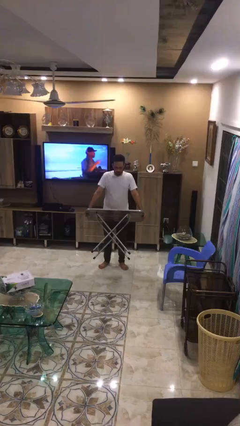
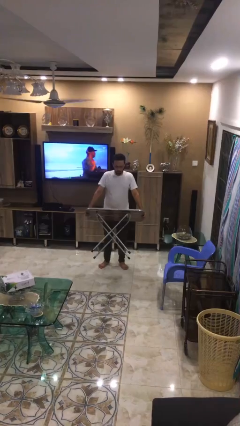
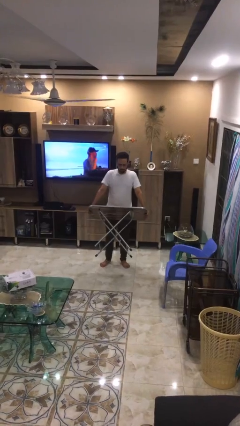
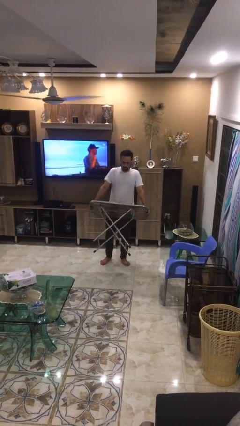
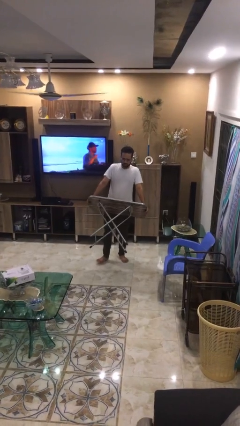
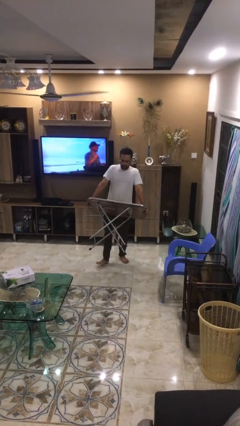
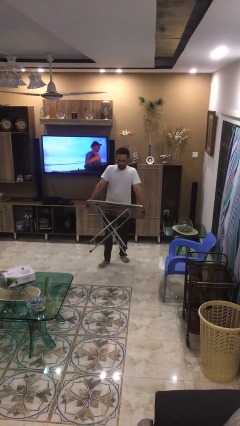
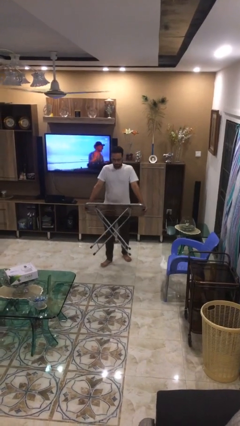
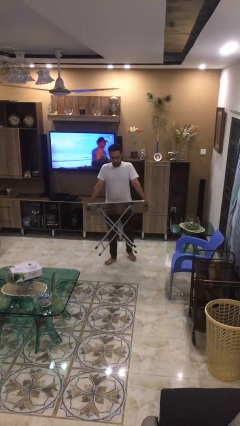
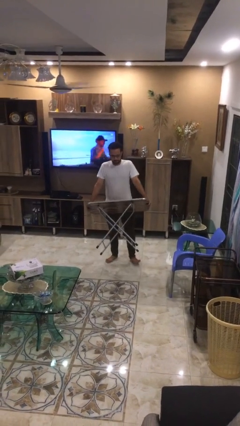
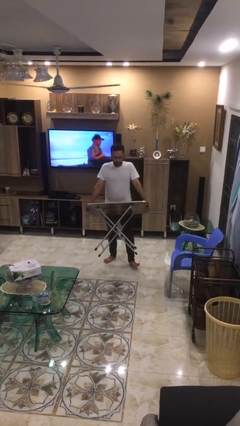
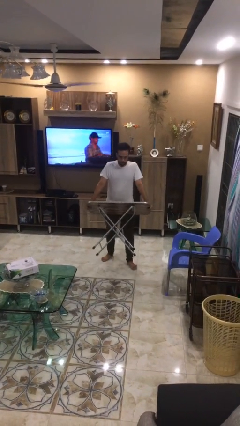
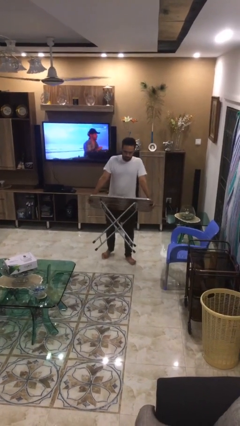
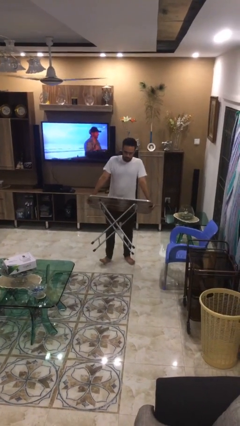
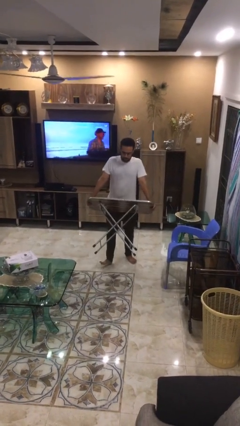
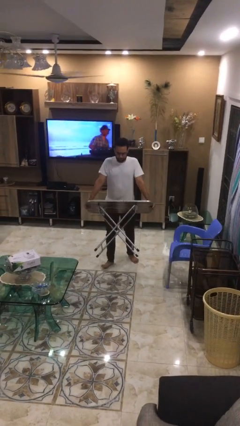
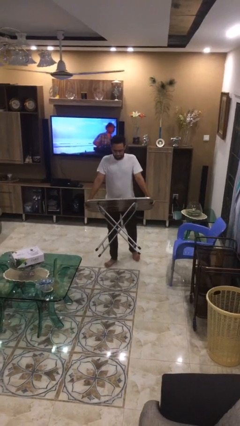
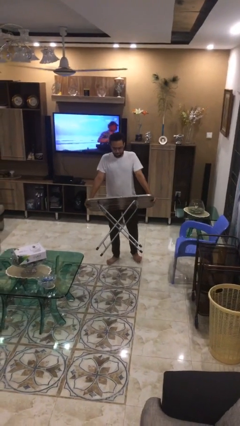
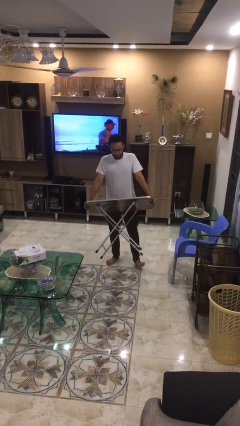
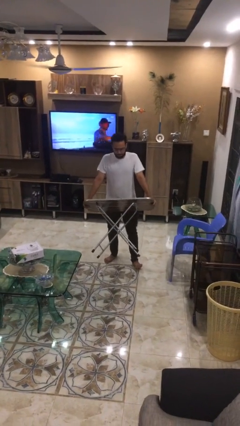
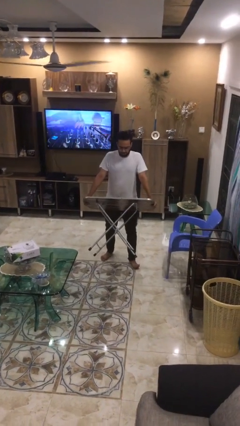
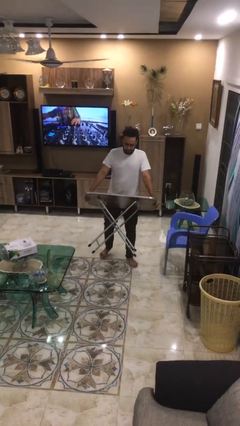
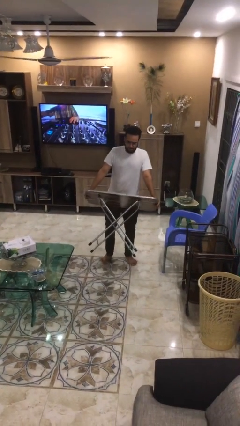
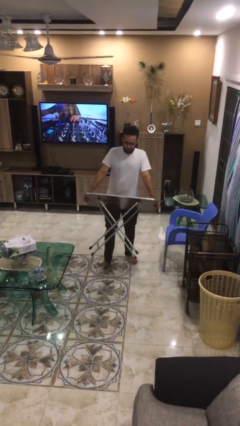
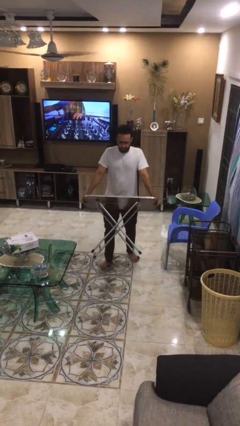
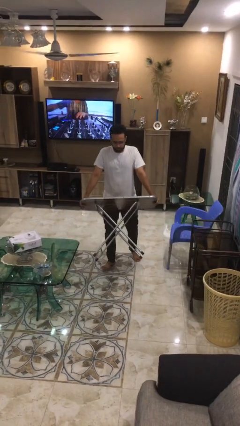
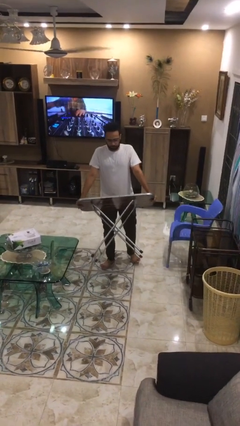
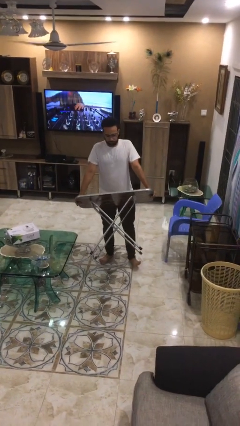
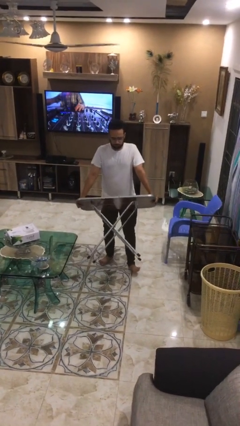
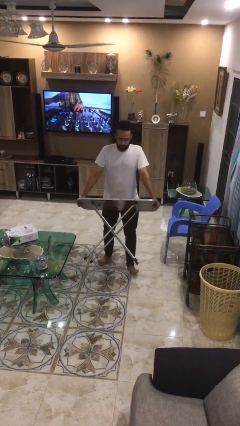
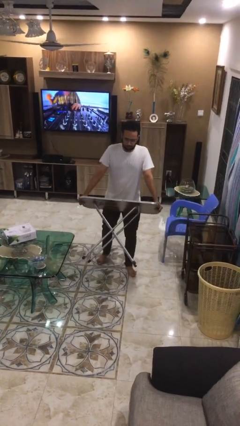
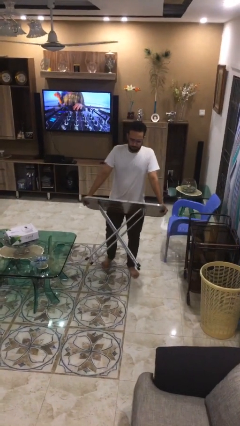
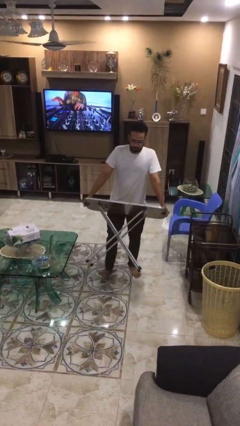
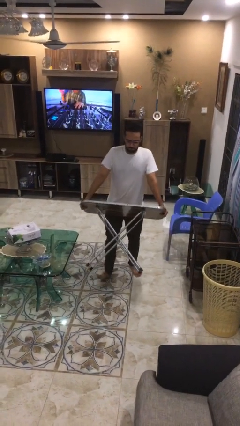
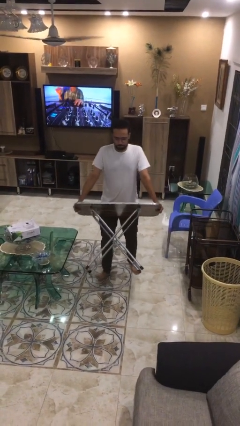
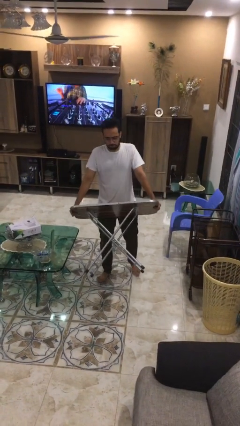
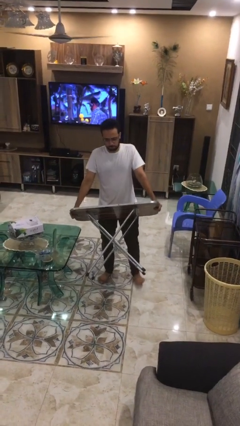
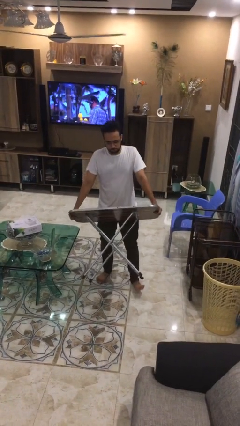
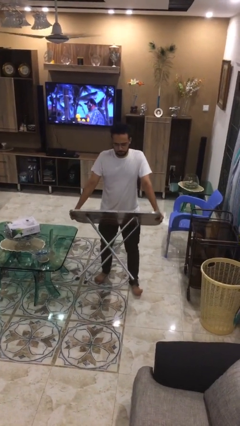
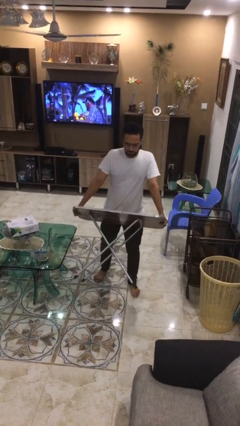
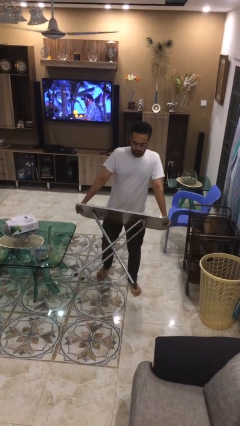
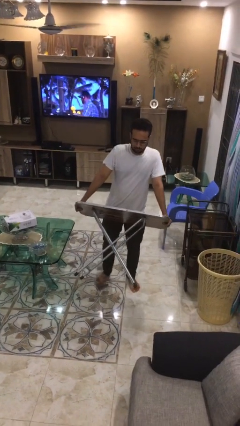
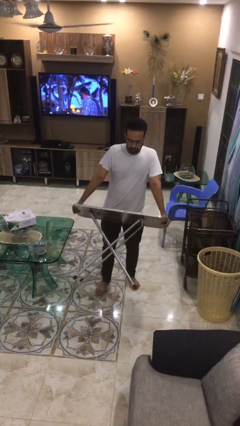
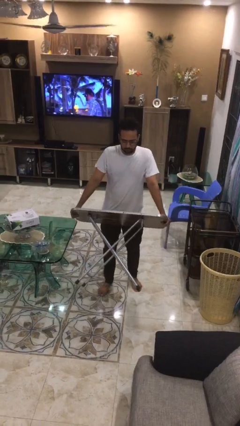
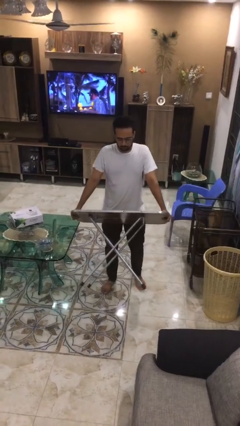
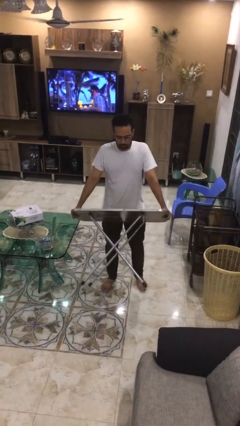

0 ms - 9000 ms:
person carries heavy object

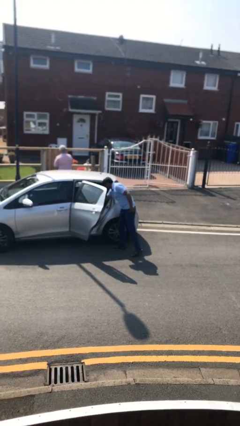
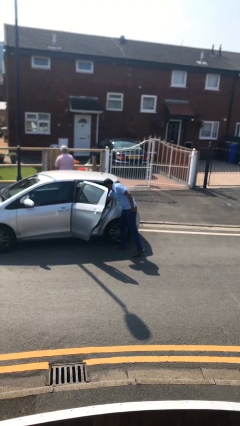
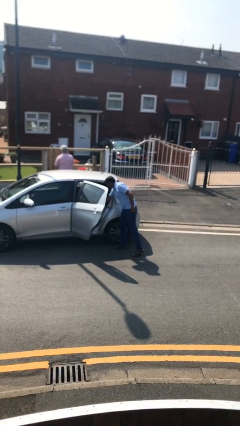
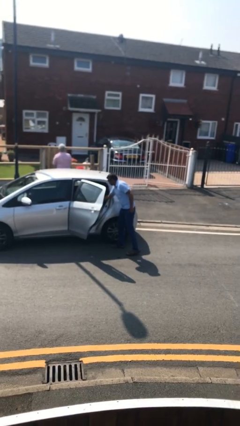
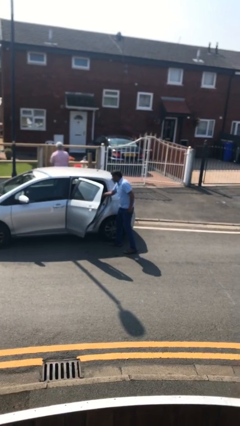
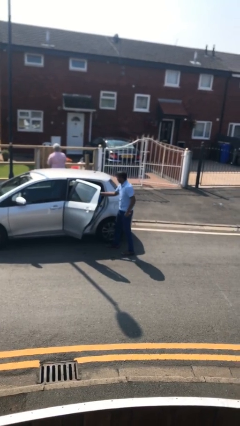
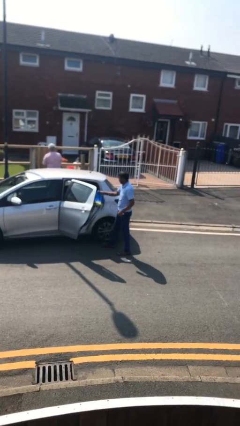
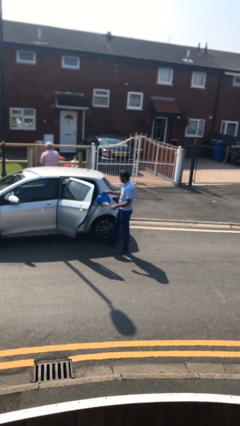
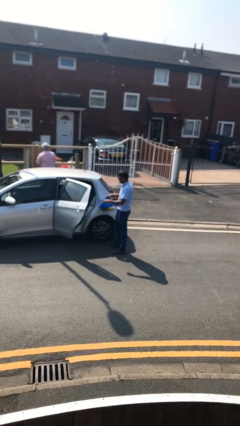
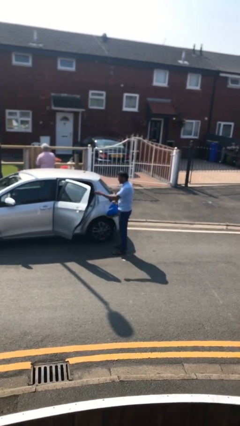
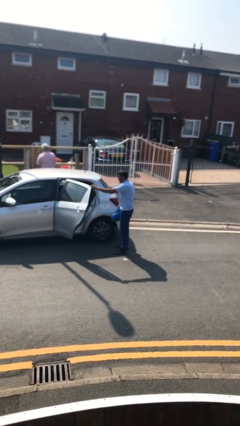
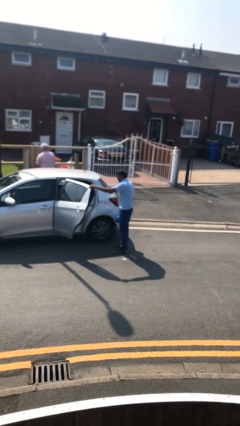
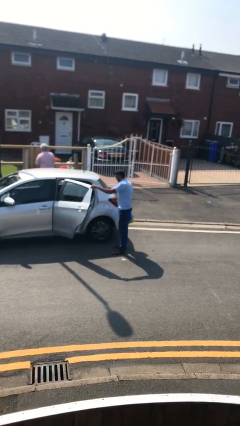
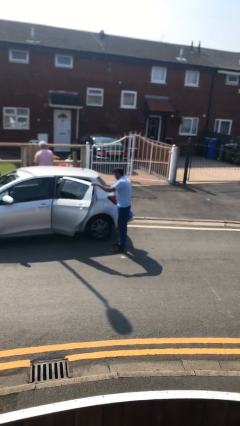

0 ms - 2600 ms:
person unloads car

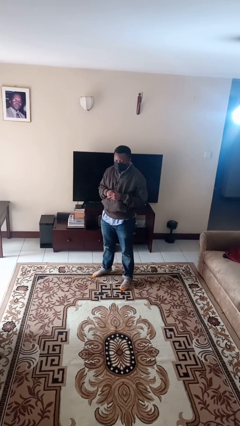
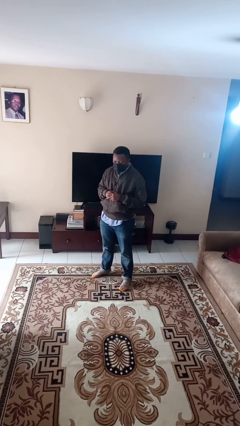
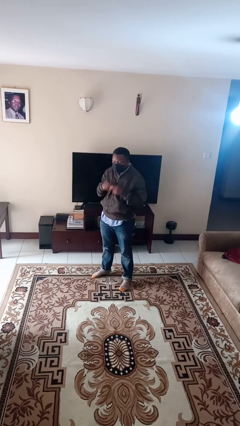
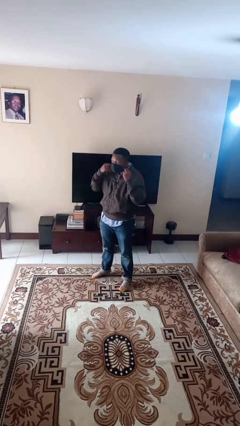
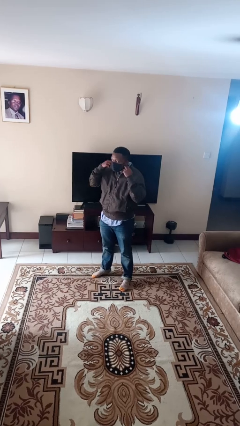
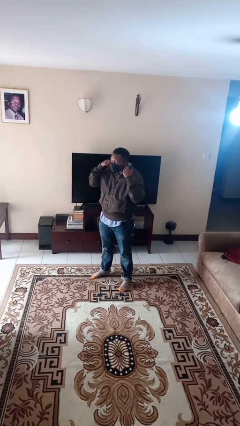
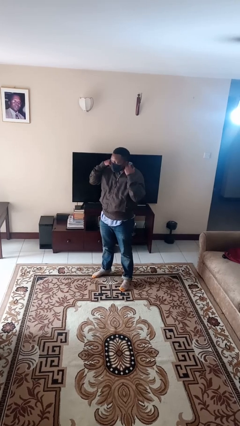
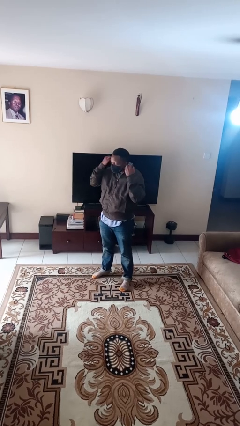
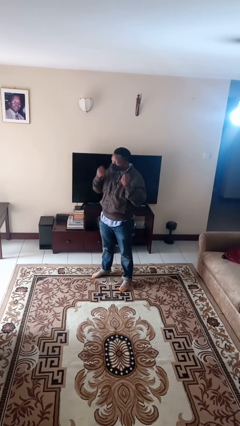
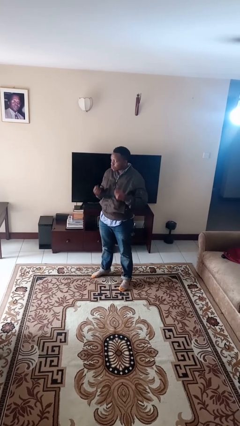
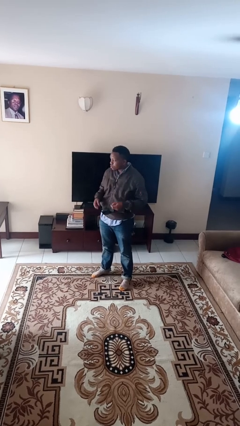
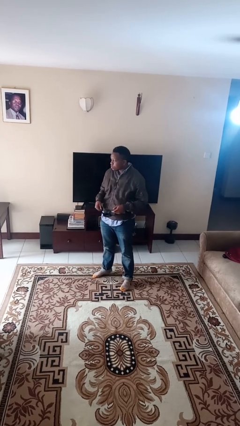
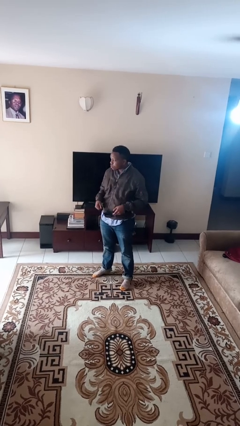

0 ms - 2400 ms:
person takes off facemask

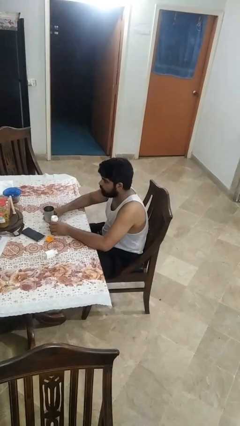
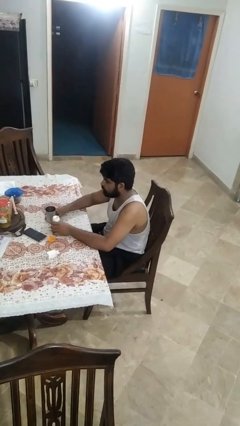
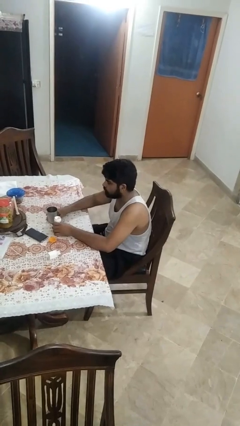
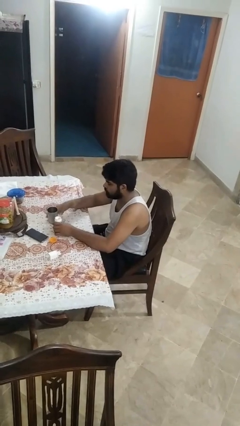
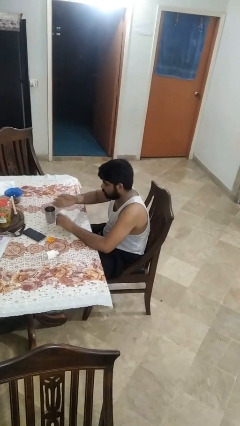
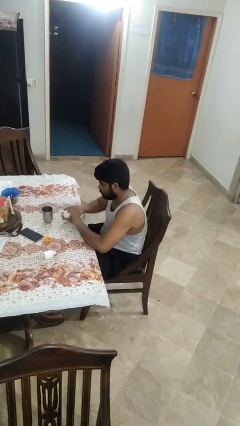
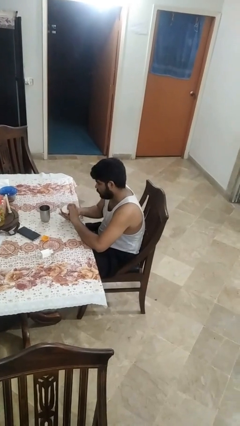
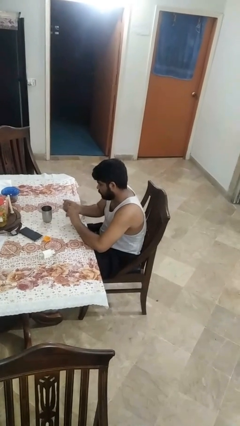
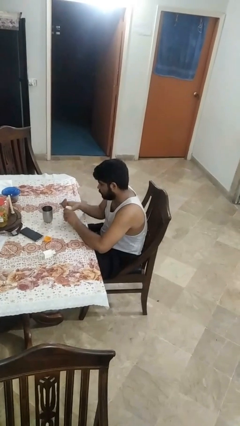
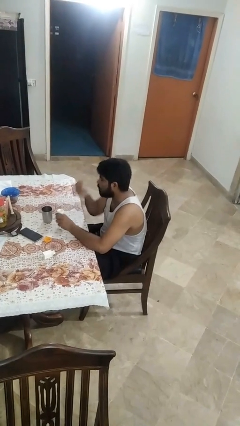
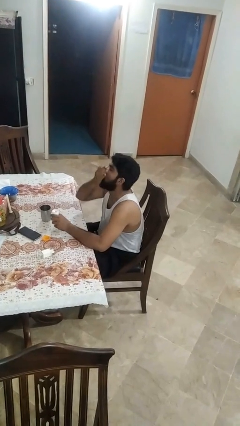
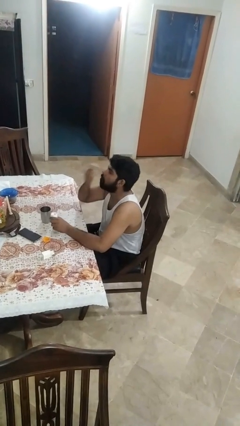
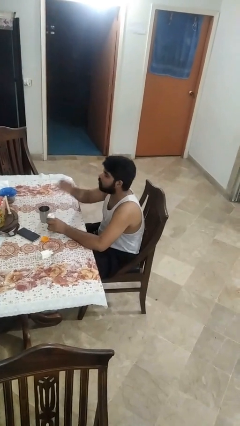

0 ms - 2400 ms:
person takes medicine pills

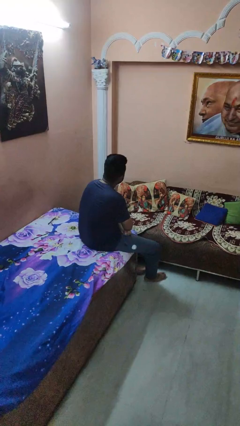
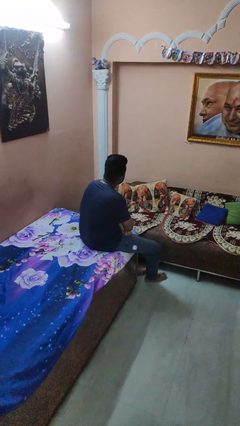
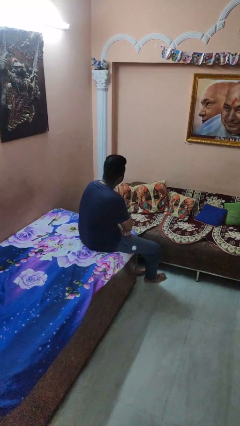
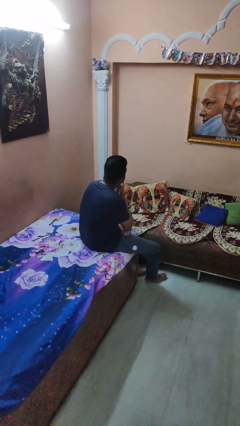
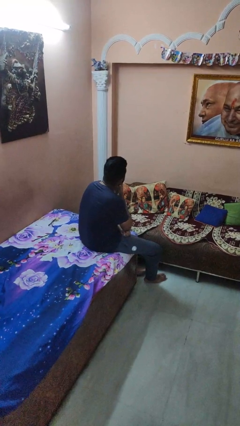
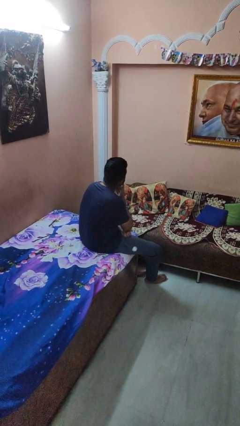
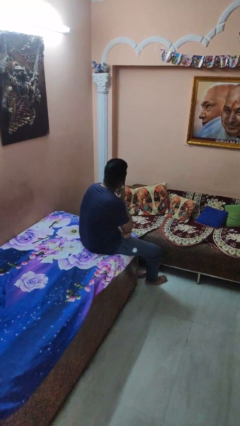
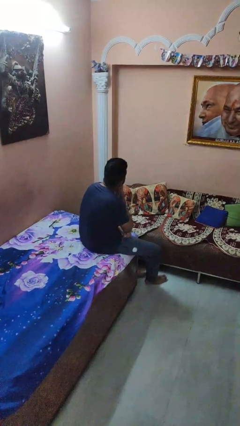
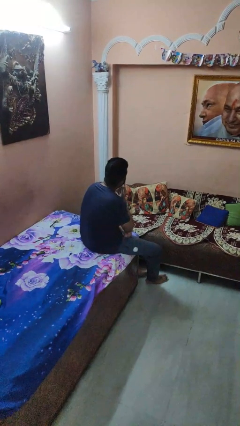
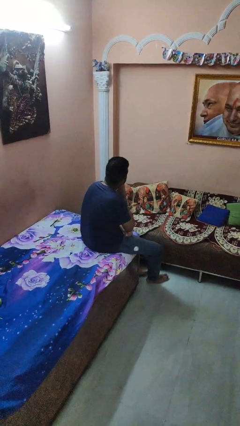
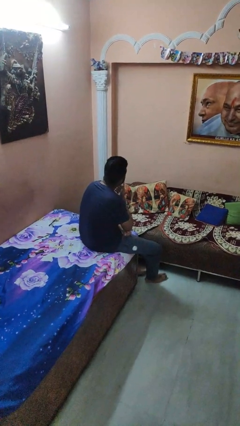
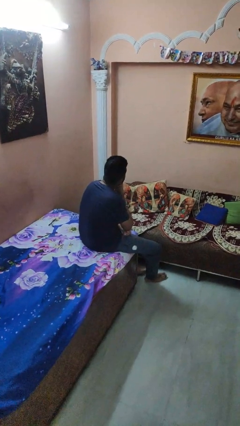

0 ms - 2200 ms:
person strokes chin
